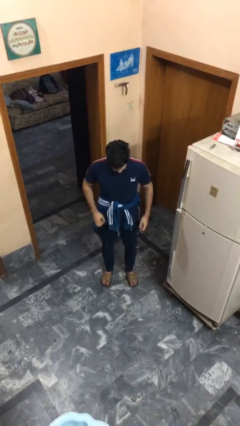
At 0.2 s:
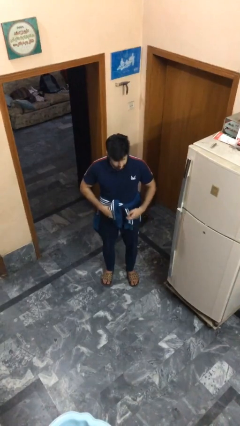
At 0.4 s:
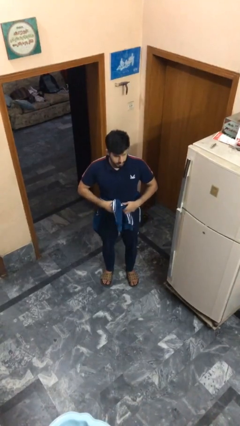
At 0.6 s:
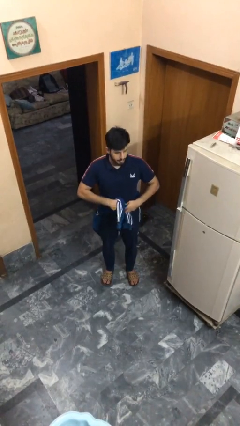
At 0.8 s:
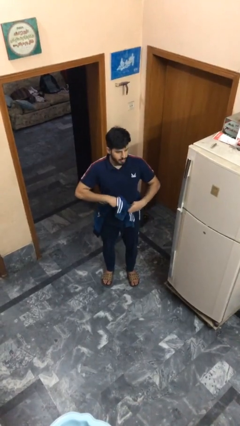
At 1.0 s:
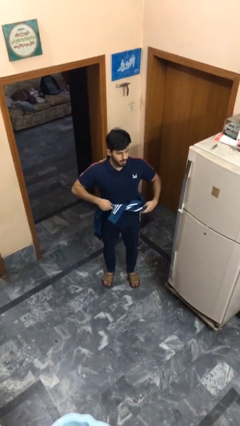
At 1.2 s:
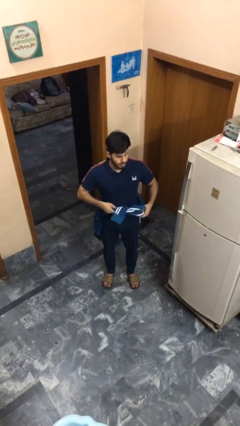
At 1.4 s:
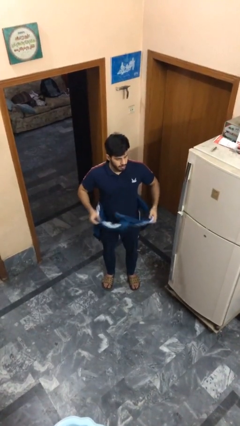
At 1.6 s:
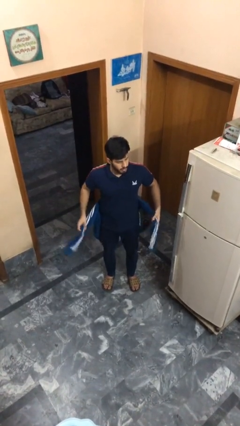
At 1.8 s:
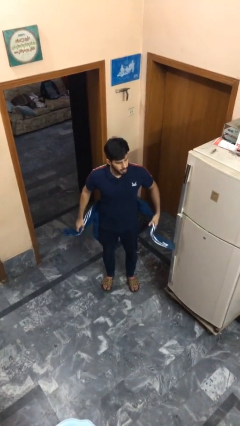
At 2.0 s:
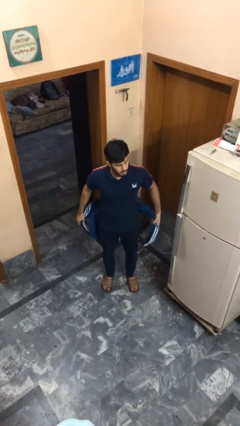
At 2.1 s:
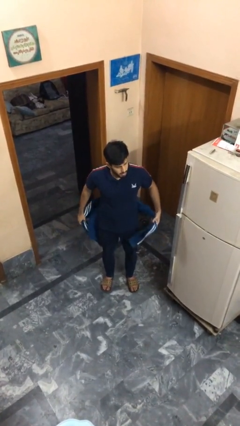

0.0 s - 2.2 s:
person unties jacket around waist

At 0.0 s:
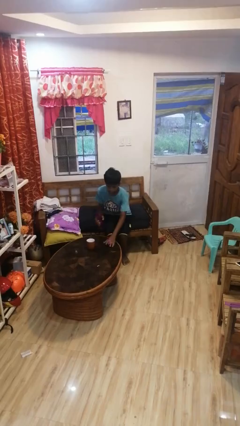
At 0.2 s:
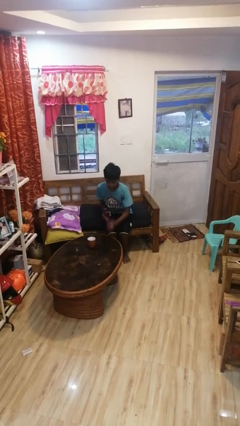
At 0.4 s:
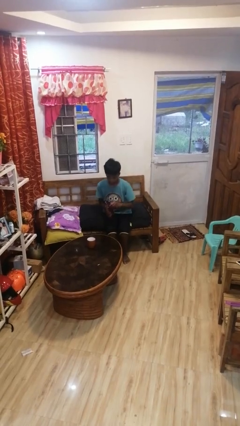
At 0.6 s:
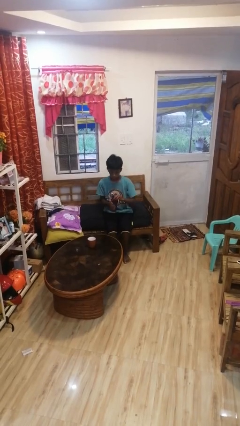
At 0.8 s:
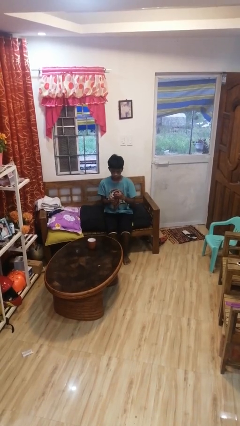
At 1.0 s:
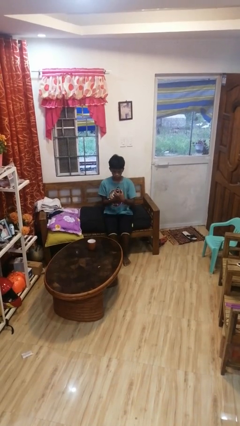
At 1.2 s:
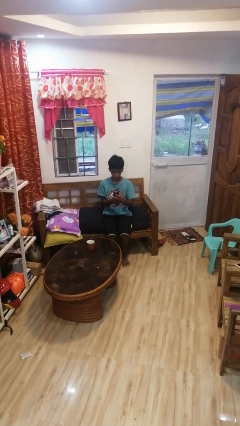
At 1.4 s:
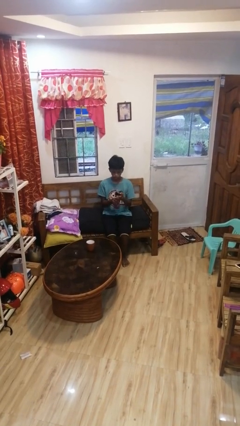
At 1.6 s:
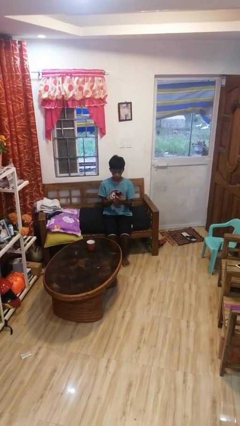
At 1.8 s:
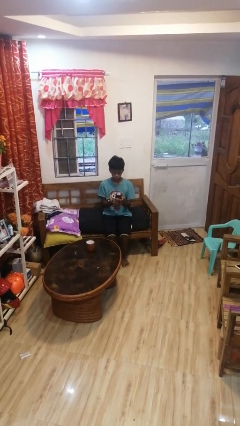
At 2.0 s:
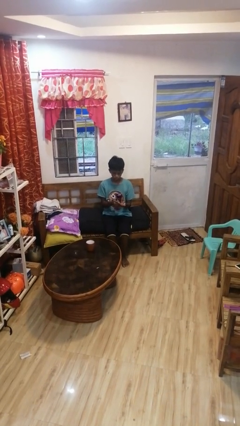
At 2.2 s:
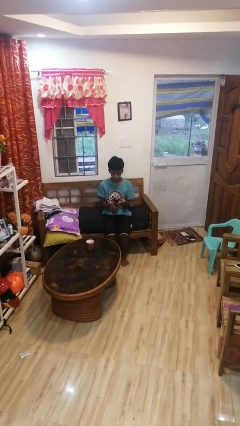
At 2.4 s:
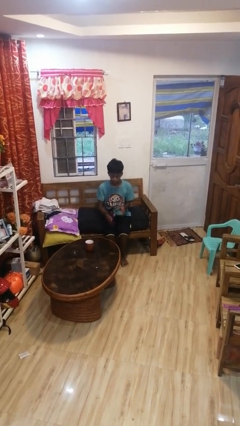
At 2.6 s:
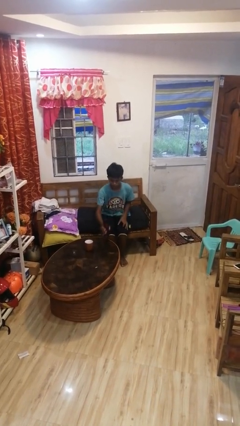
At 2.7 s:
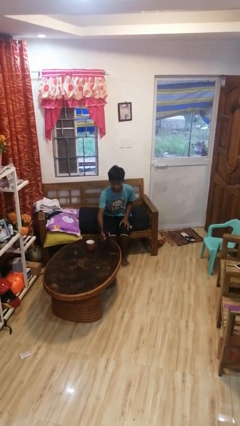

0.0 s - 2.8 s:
person screws lid to bottle

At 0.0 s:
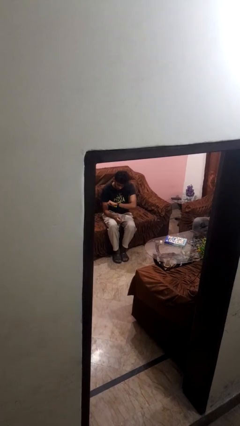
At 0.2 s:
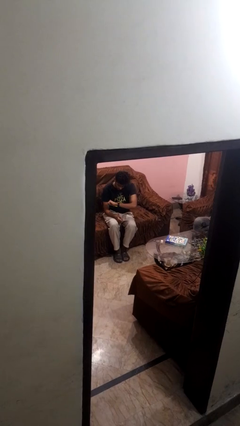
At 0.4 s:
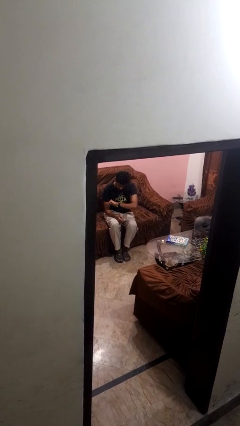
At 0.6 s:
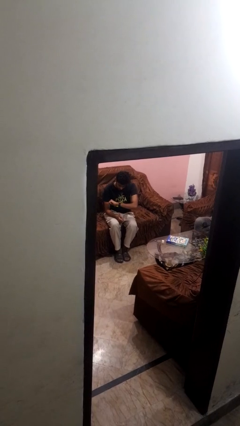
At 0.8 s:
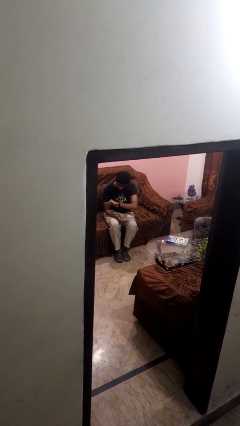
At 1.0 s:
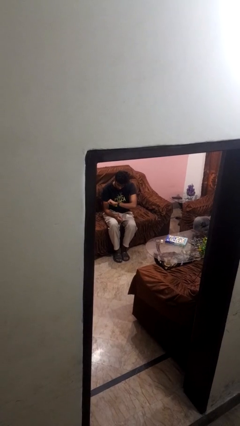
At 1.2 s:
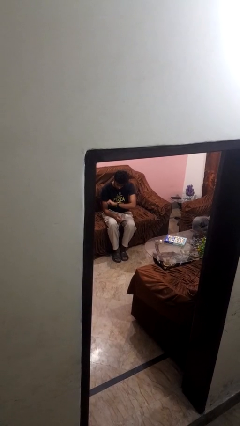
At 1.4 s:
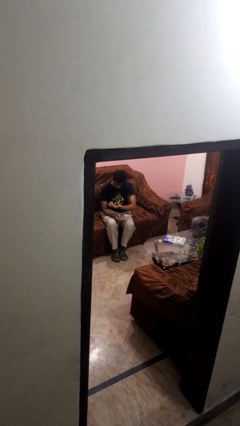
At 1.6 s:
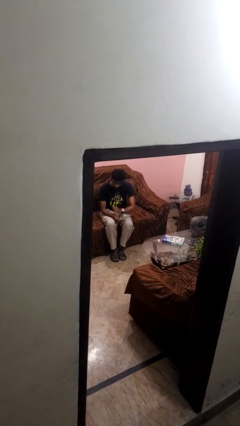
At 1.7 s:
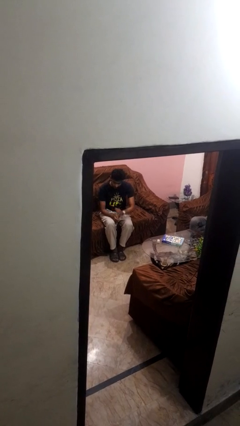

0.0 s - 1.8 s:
person looks at wristwatch

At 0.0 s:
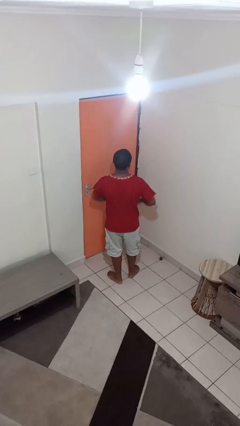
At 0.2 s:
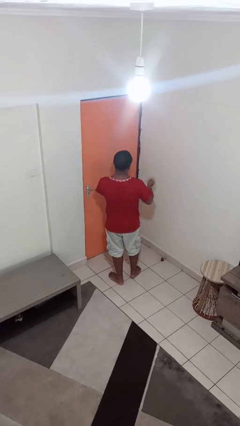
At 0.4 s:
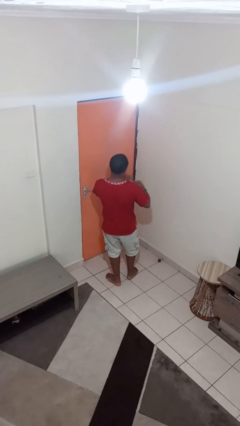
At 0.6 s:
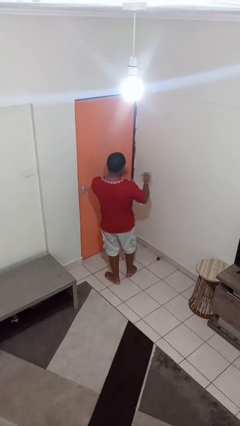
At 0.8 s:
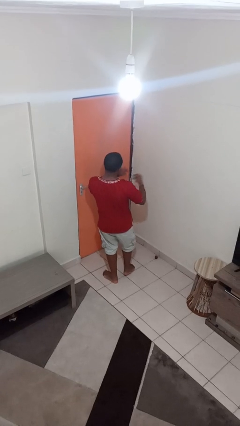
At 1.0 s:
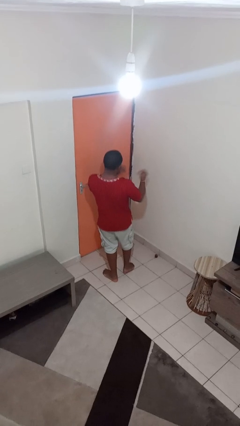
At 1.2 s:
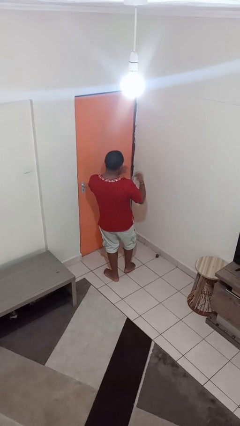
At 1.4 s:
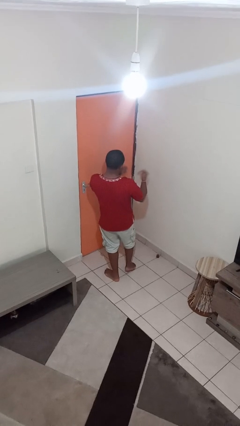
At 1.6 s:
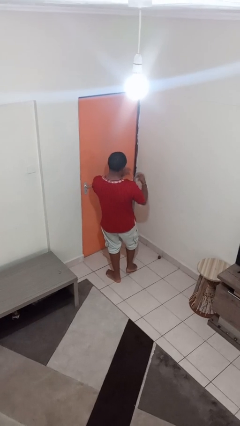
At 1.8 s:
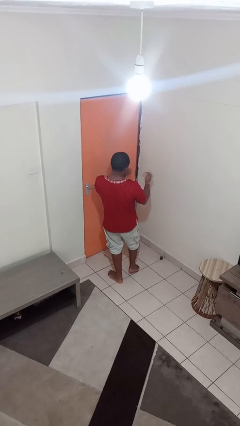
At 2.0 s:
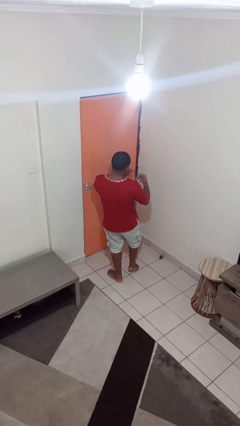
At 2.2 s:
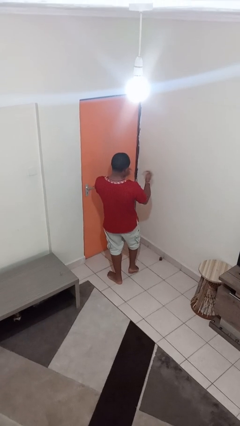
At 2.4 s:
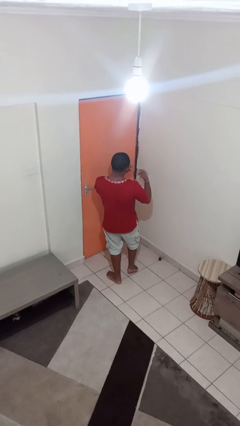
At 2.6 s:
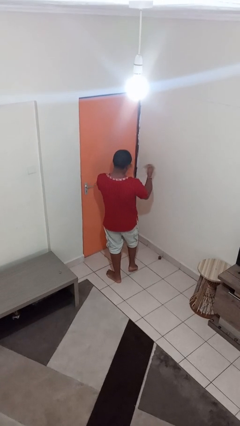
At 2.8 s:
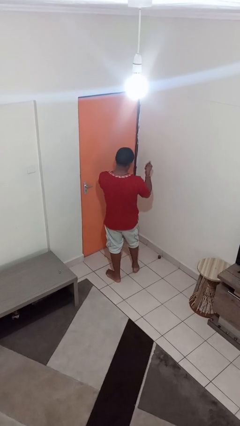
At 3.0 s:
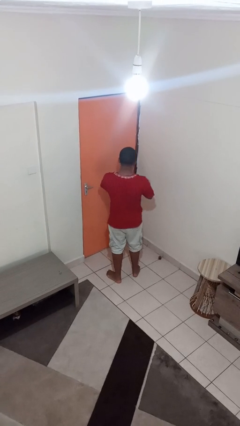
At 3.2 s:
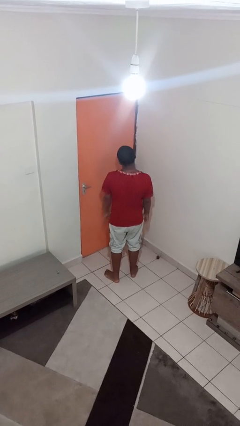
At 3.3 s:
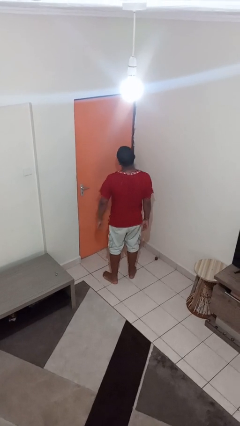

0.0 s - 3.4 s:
person snaps fingers

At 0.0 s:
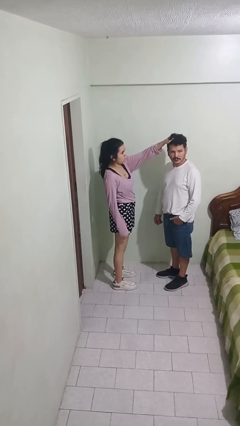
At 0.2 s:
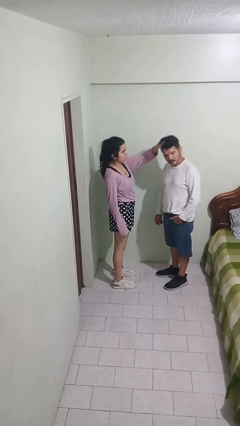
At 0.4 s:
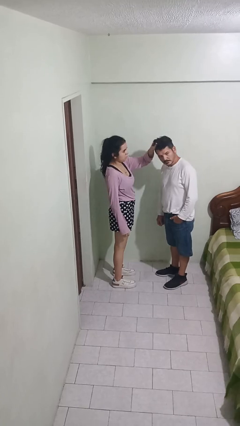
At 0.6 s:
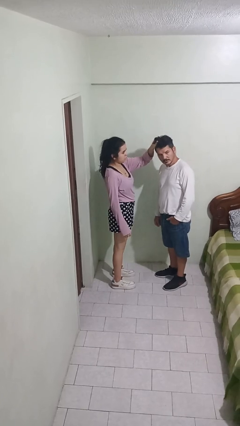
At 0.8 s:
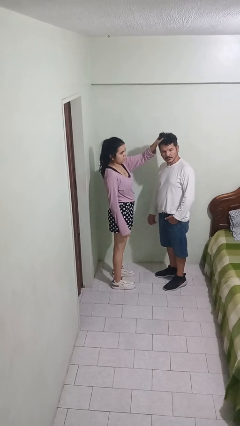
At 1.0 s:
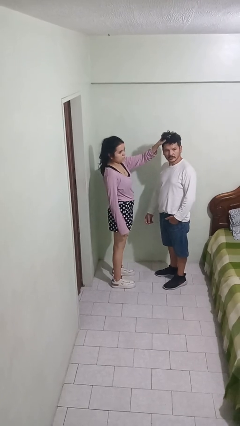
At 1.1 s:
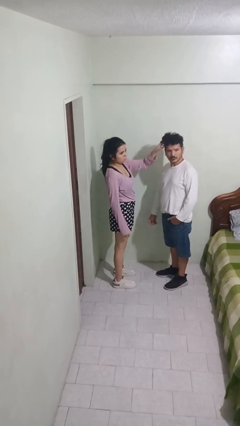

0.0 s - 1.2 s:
person grabs person by hair

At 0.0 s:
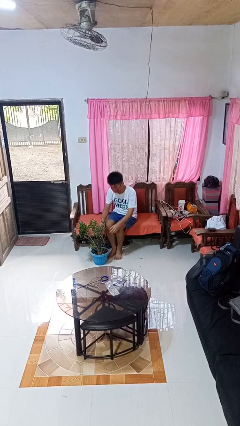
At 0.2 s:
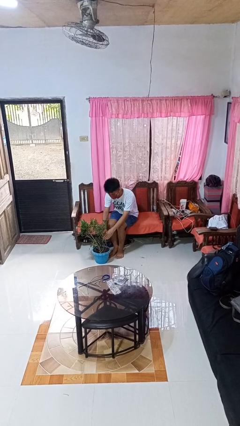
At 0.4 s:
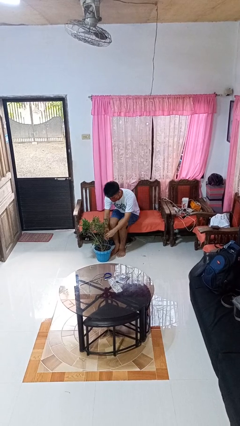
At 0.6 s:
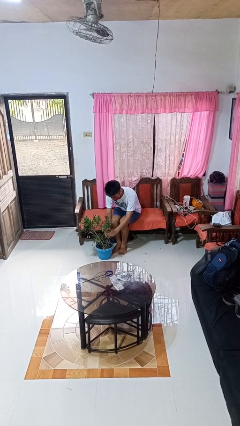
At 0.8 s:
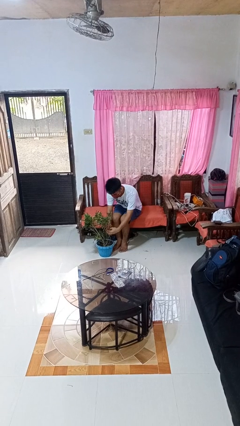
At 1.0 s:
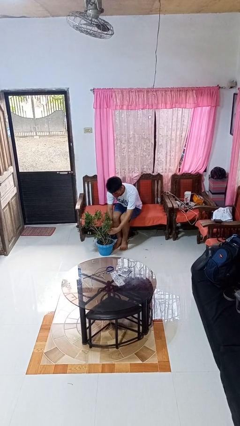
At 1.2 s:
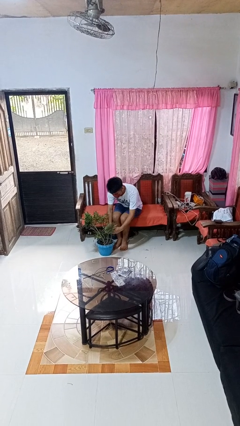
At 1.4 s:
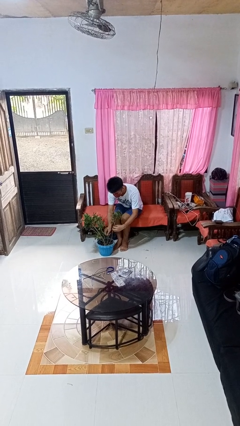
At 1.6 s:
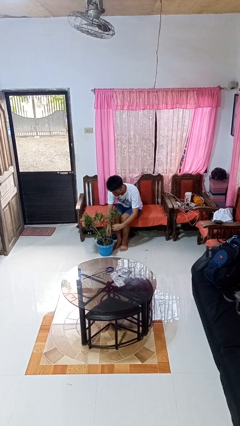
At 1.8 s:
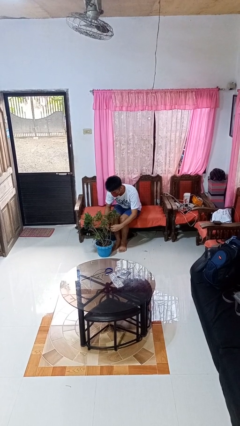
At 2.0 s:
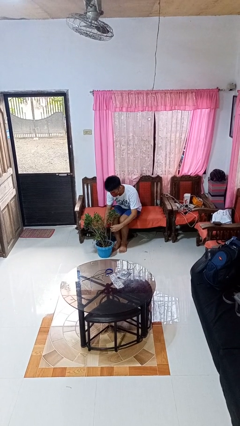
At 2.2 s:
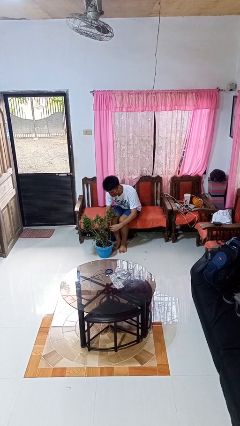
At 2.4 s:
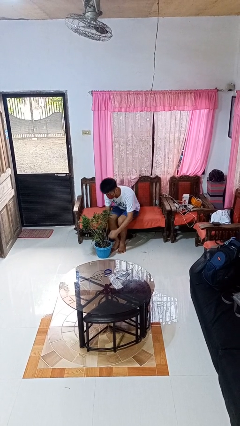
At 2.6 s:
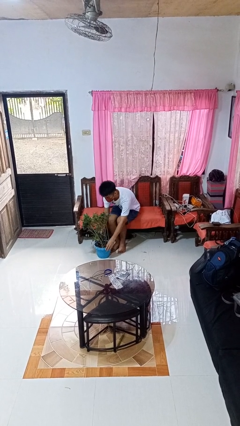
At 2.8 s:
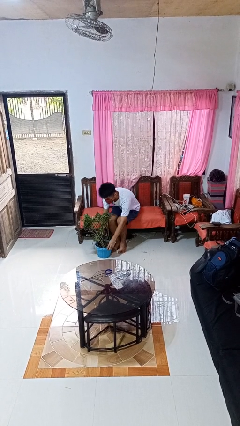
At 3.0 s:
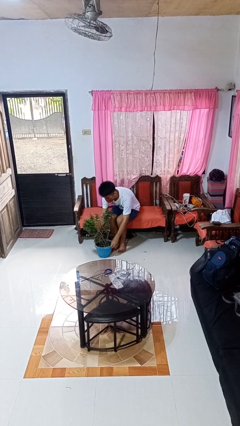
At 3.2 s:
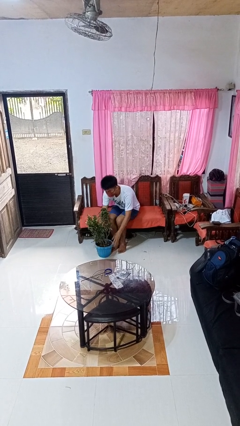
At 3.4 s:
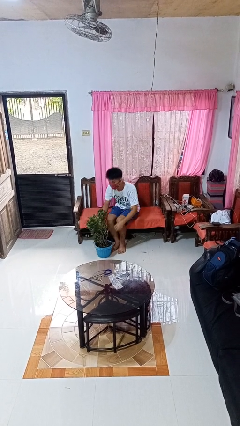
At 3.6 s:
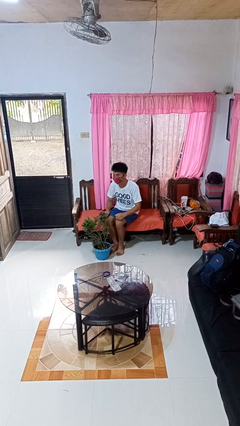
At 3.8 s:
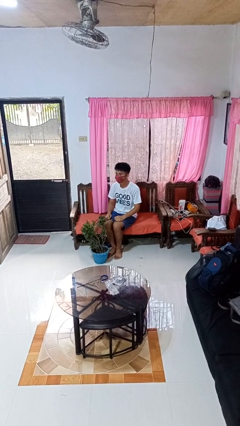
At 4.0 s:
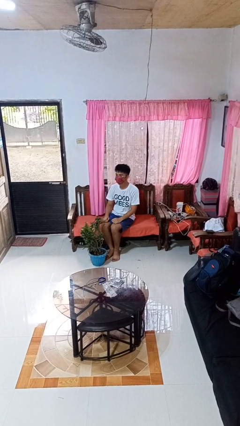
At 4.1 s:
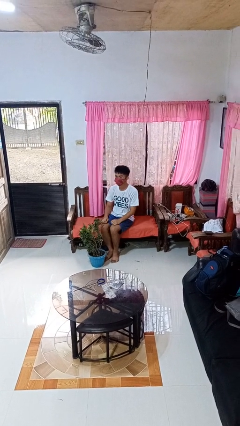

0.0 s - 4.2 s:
person arranges flowers in vase

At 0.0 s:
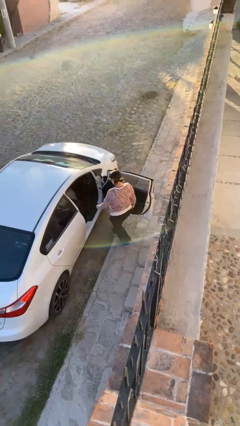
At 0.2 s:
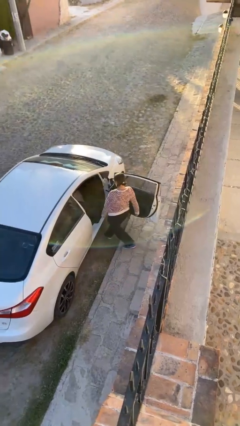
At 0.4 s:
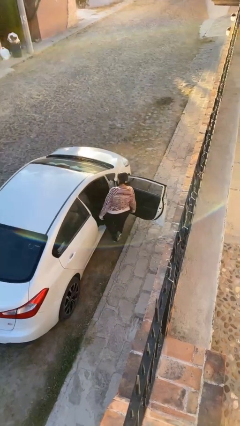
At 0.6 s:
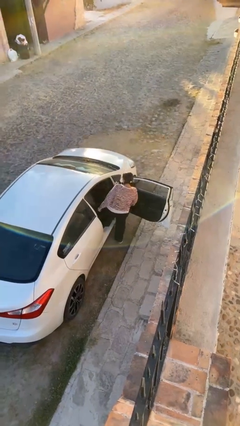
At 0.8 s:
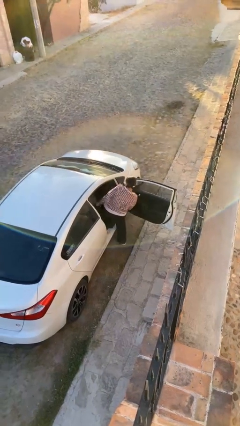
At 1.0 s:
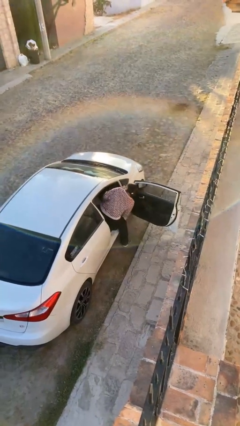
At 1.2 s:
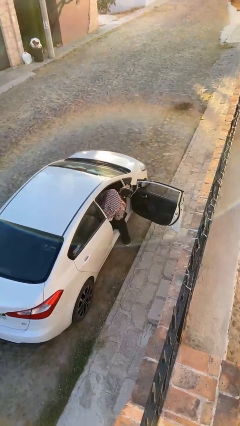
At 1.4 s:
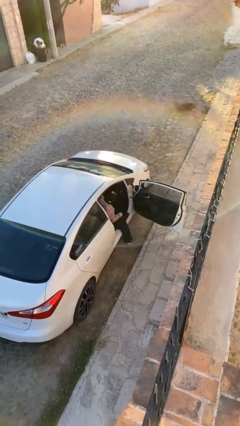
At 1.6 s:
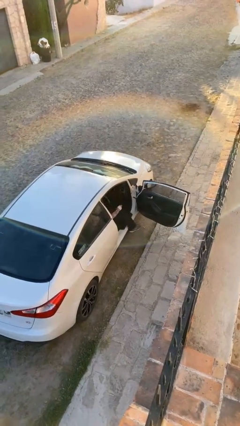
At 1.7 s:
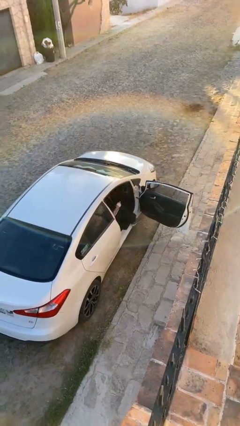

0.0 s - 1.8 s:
person enters car
